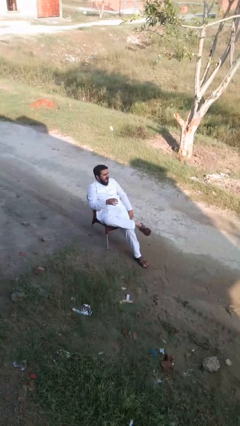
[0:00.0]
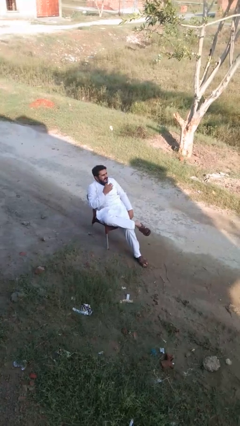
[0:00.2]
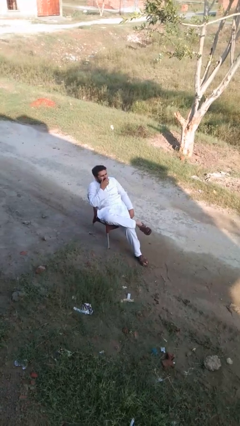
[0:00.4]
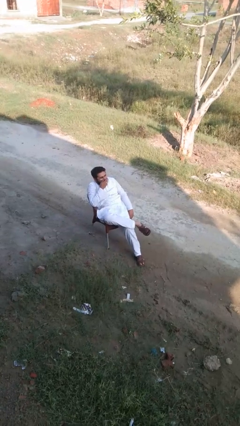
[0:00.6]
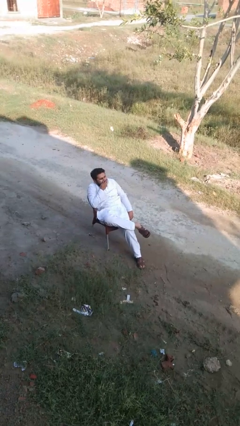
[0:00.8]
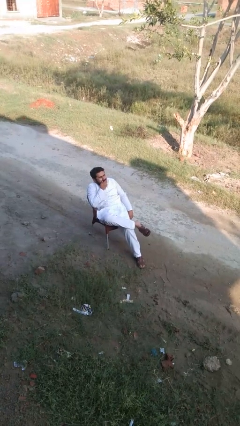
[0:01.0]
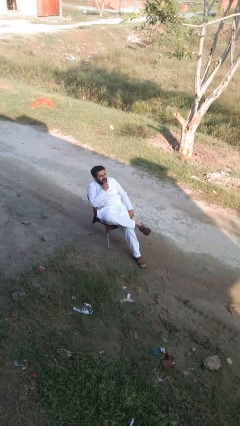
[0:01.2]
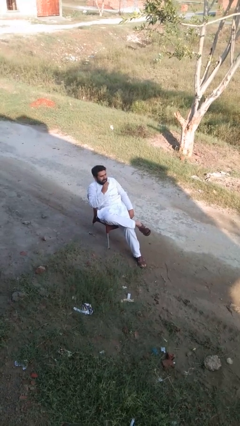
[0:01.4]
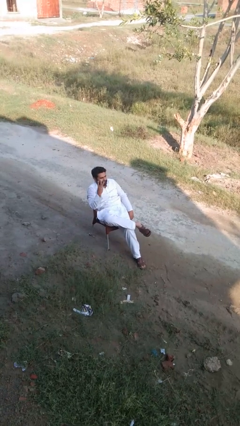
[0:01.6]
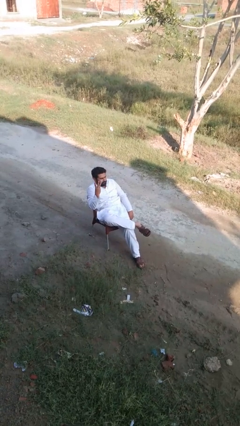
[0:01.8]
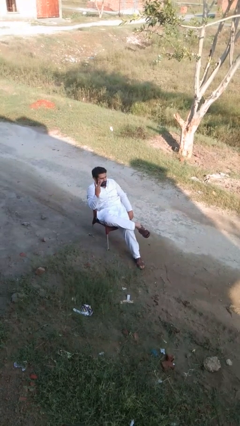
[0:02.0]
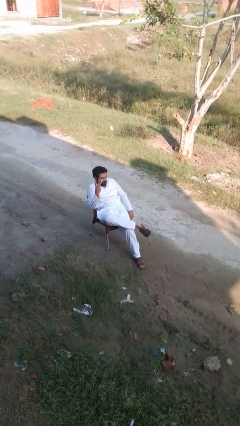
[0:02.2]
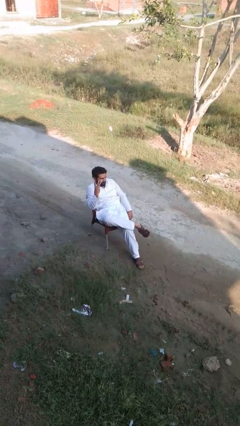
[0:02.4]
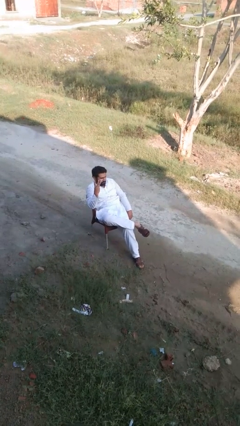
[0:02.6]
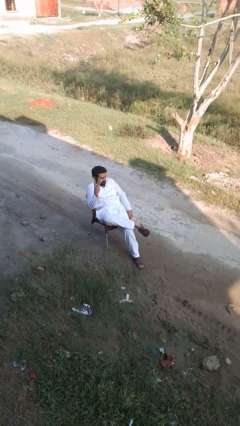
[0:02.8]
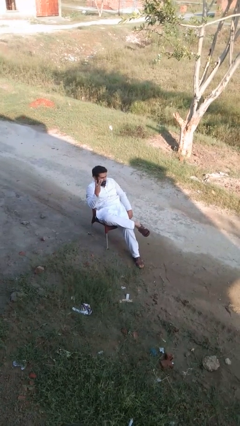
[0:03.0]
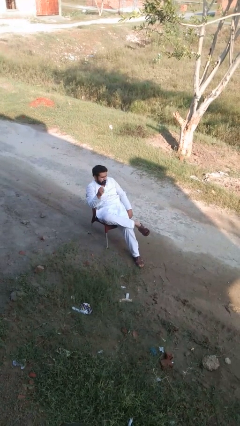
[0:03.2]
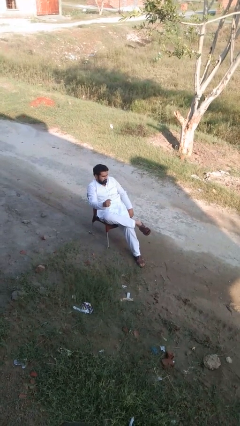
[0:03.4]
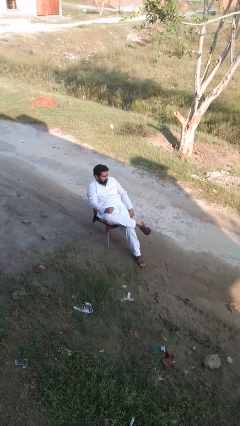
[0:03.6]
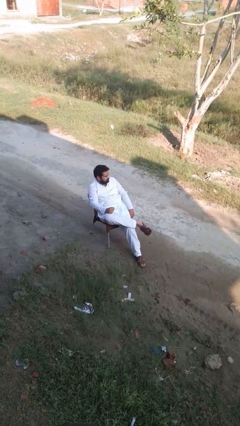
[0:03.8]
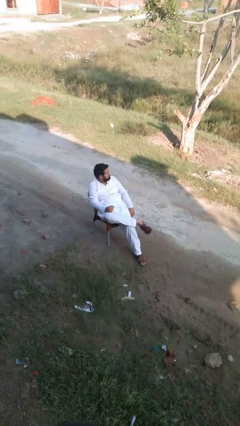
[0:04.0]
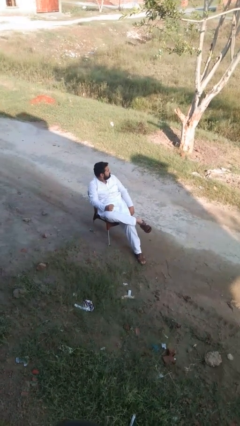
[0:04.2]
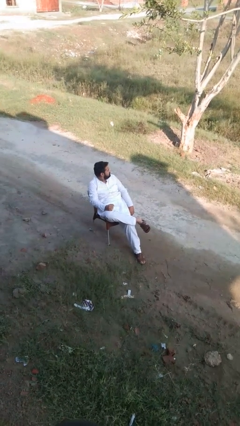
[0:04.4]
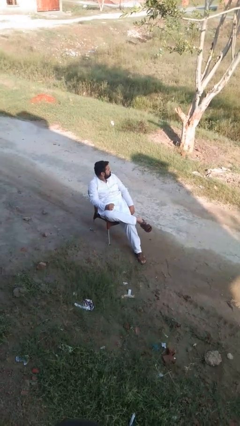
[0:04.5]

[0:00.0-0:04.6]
person gestures number three

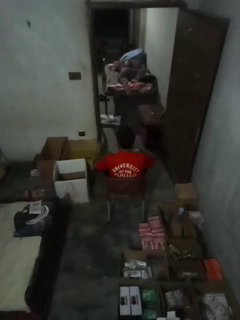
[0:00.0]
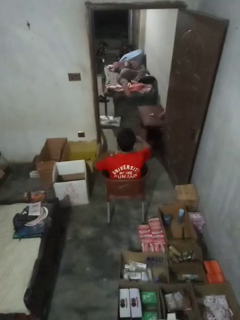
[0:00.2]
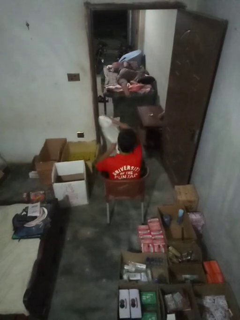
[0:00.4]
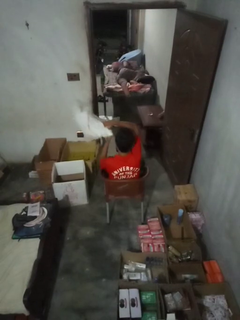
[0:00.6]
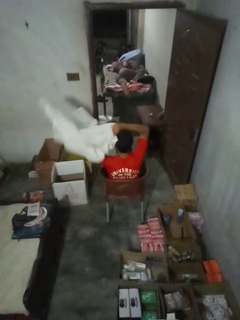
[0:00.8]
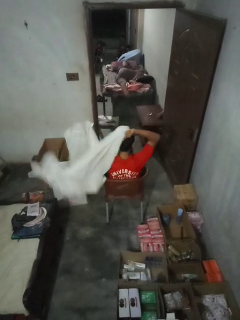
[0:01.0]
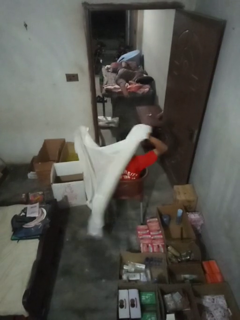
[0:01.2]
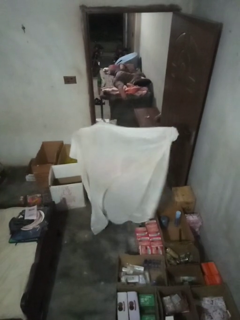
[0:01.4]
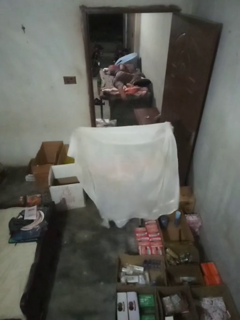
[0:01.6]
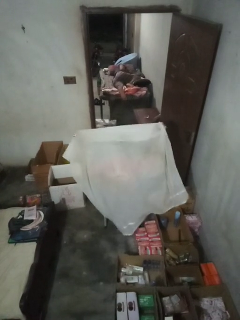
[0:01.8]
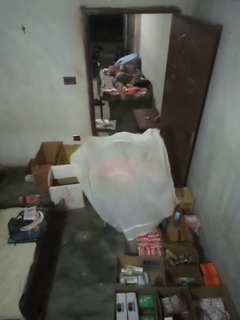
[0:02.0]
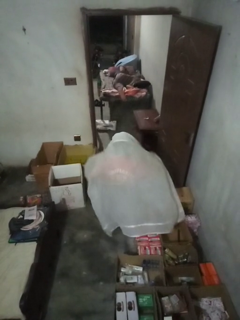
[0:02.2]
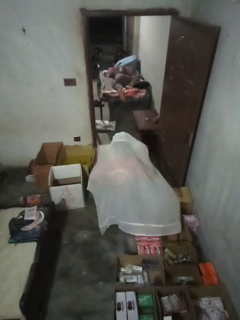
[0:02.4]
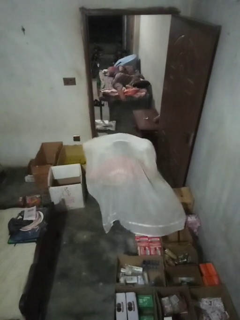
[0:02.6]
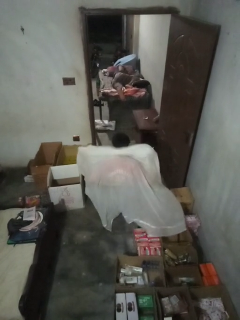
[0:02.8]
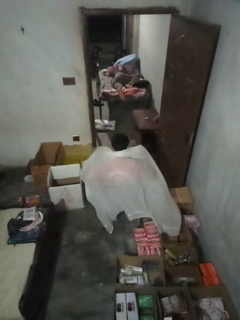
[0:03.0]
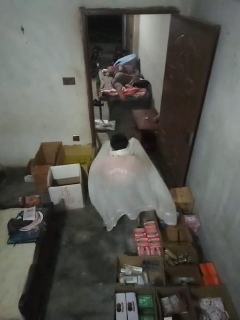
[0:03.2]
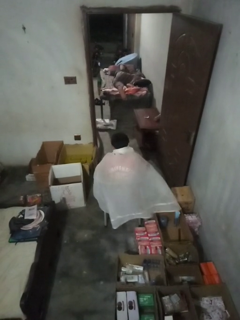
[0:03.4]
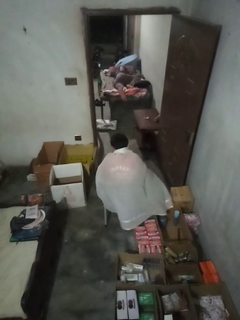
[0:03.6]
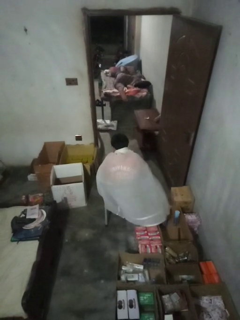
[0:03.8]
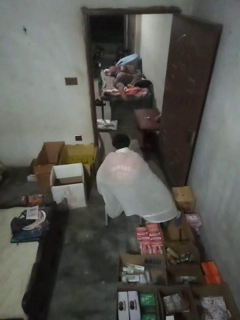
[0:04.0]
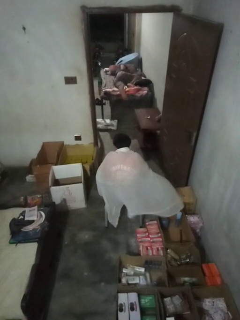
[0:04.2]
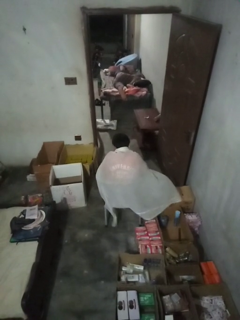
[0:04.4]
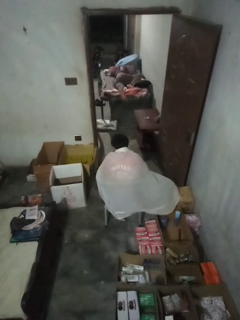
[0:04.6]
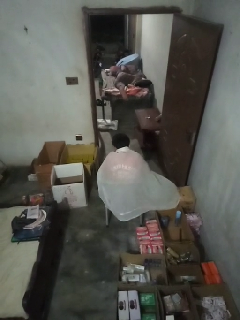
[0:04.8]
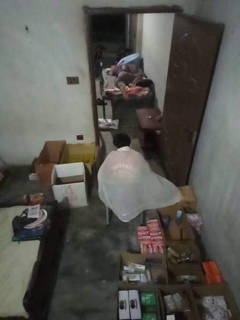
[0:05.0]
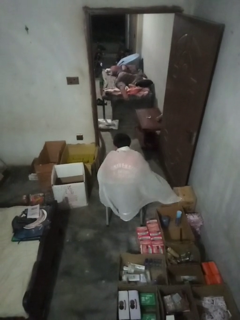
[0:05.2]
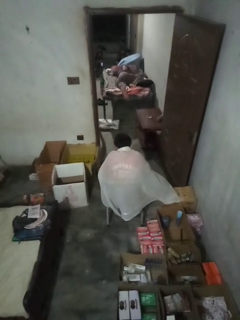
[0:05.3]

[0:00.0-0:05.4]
person covers with blanket

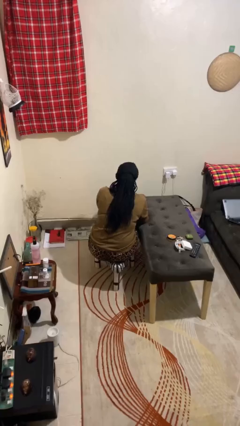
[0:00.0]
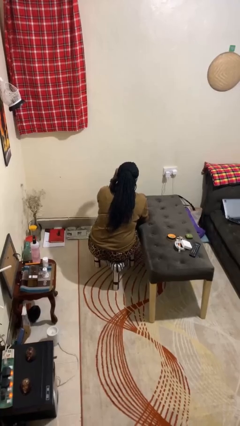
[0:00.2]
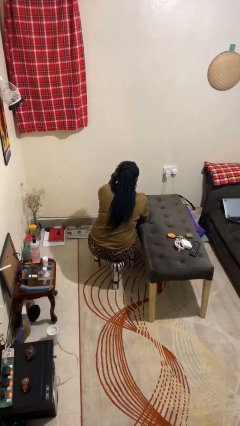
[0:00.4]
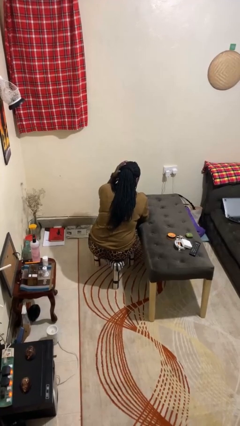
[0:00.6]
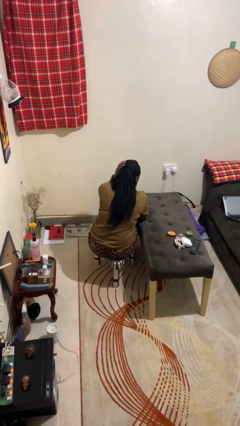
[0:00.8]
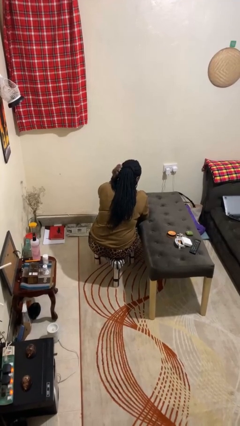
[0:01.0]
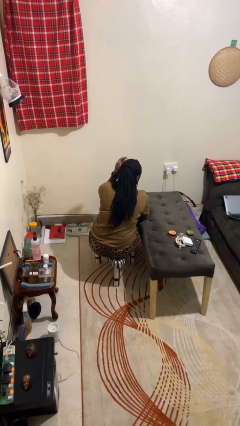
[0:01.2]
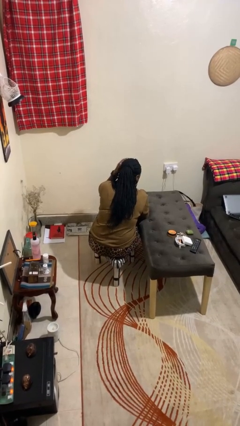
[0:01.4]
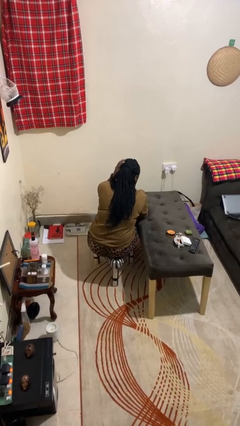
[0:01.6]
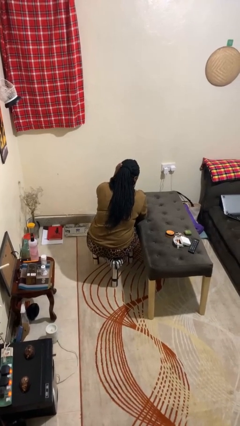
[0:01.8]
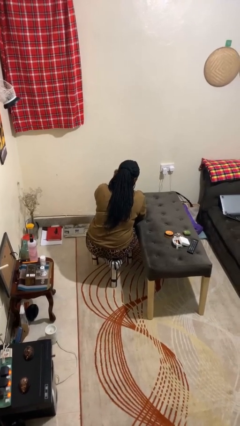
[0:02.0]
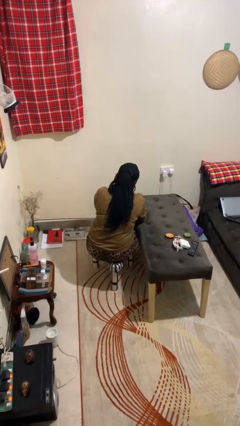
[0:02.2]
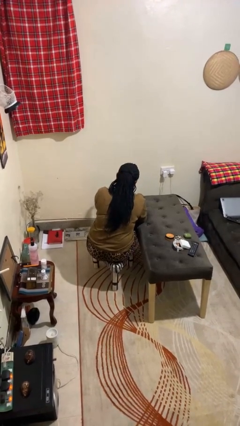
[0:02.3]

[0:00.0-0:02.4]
person strokes hair

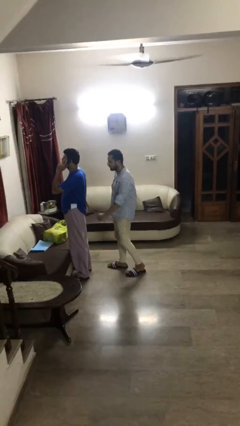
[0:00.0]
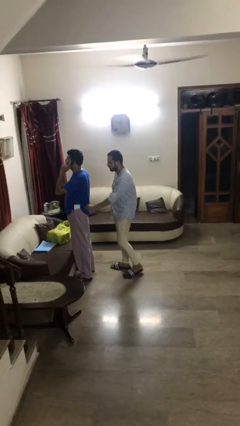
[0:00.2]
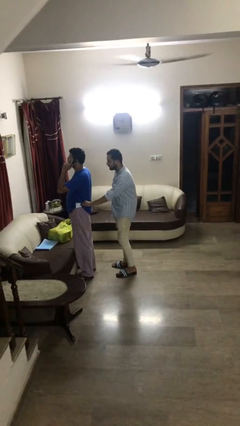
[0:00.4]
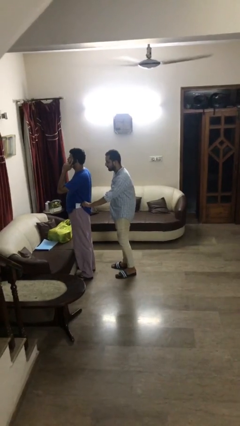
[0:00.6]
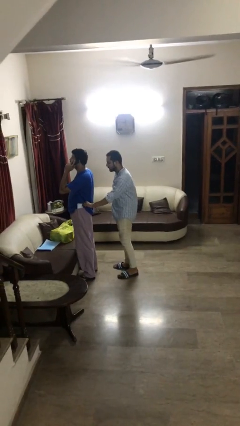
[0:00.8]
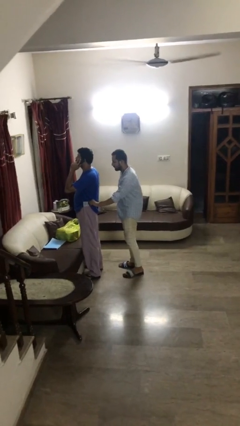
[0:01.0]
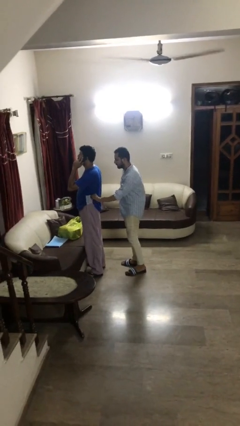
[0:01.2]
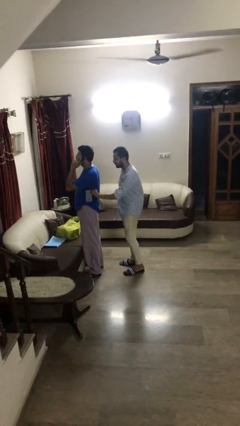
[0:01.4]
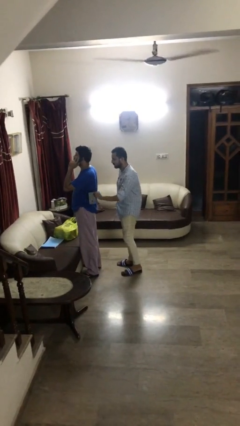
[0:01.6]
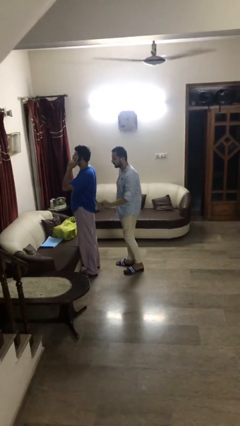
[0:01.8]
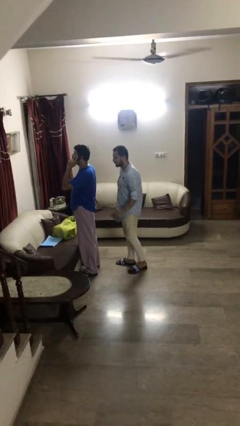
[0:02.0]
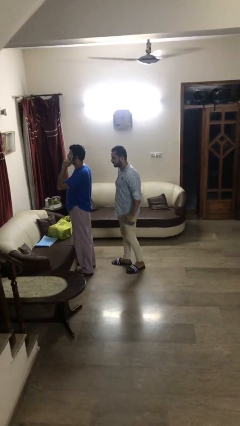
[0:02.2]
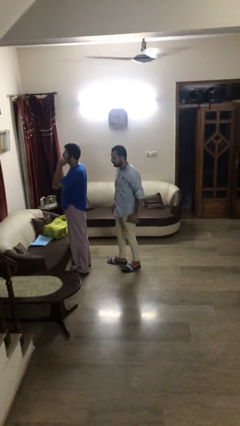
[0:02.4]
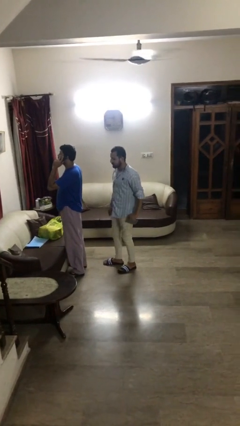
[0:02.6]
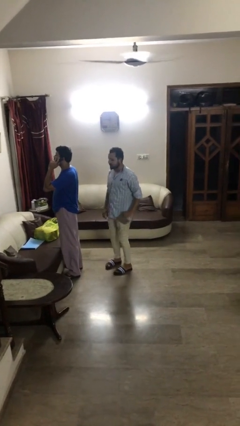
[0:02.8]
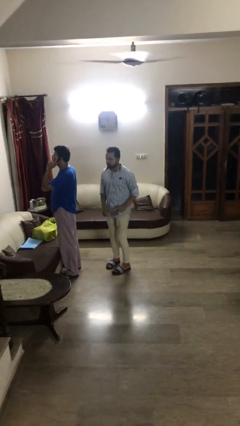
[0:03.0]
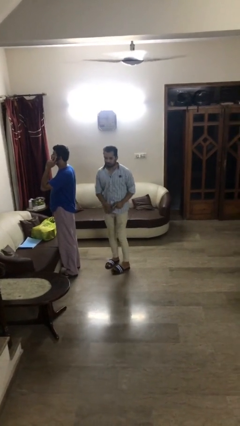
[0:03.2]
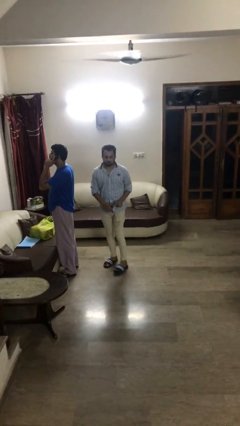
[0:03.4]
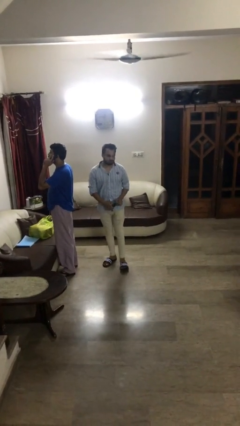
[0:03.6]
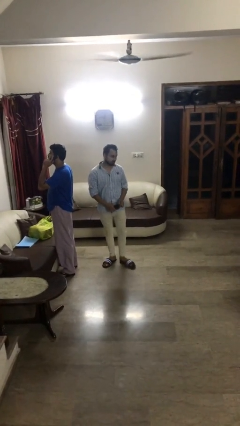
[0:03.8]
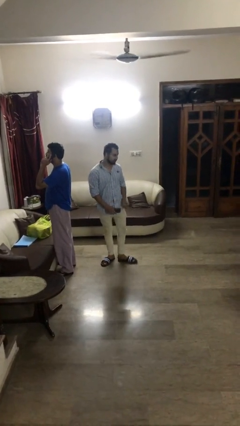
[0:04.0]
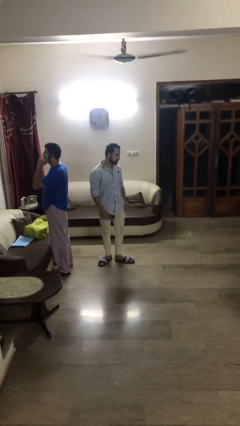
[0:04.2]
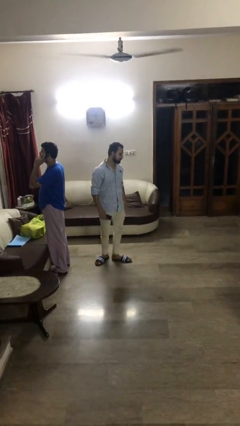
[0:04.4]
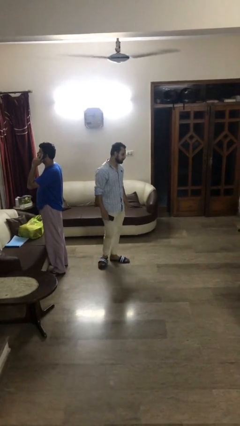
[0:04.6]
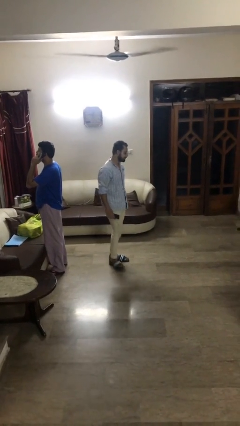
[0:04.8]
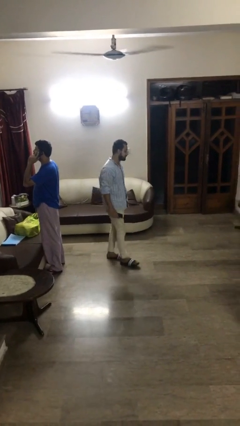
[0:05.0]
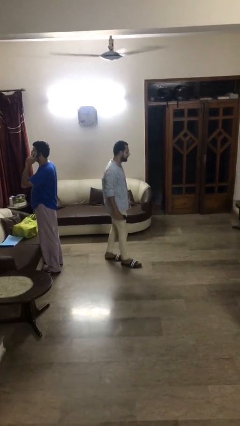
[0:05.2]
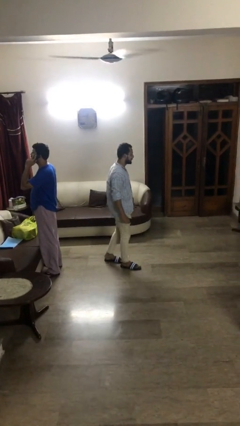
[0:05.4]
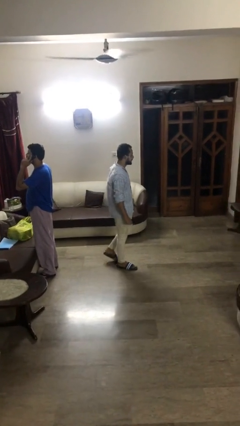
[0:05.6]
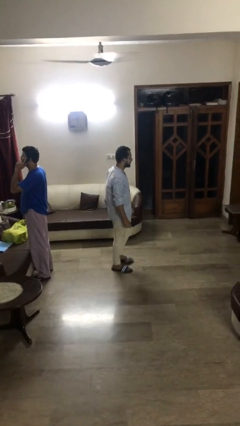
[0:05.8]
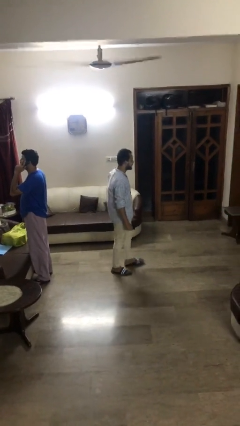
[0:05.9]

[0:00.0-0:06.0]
person steals object from person

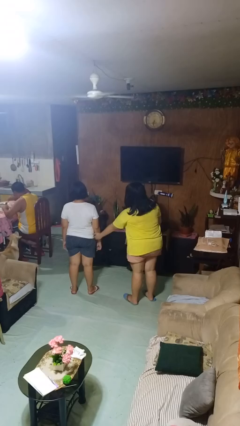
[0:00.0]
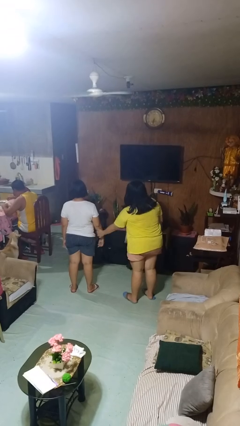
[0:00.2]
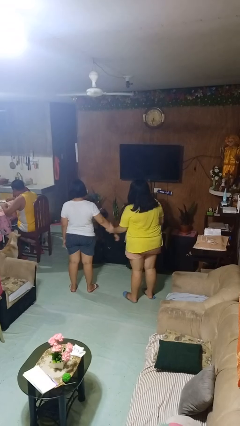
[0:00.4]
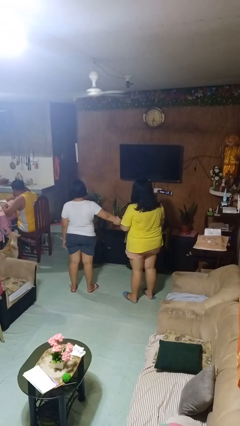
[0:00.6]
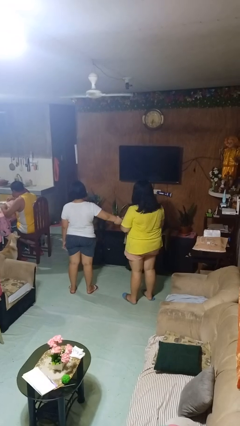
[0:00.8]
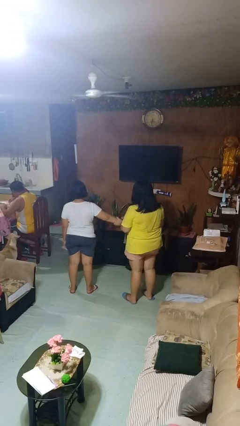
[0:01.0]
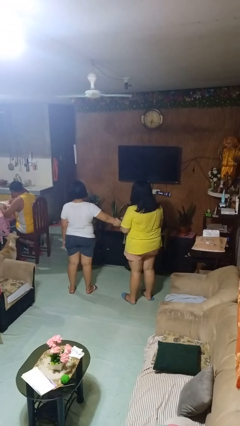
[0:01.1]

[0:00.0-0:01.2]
person grabs person by forearm
